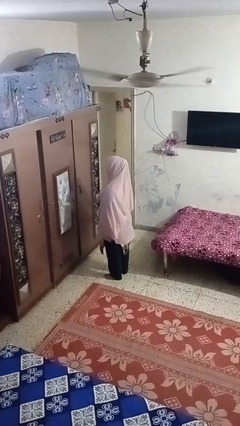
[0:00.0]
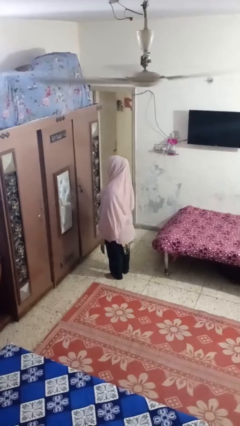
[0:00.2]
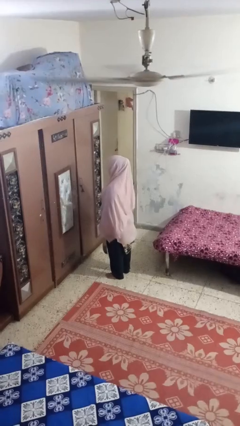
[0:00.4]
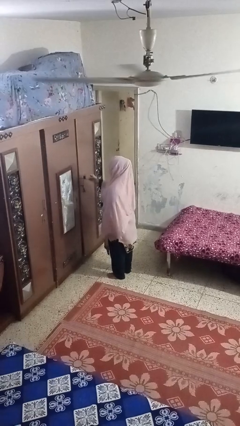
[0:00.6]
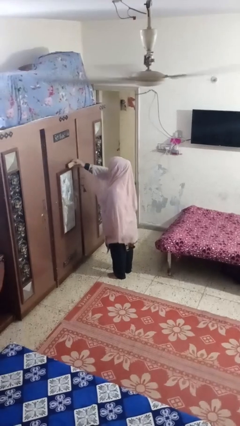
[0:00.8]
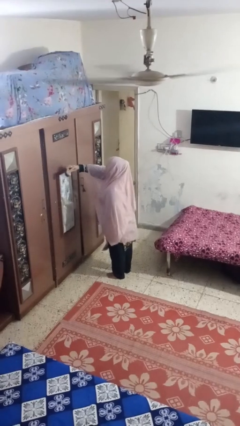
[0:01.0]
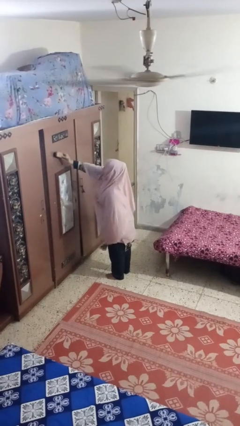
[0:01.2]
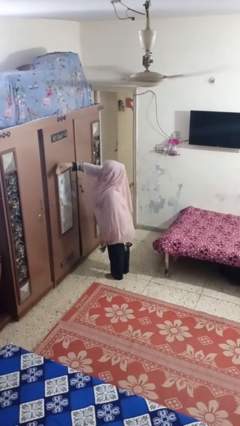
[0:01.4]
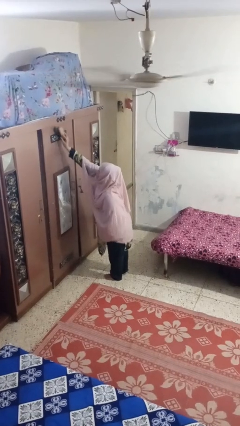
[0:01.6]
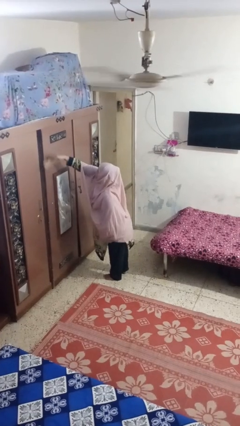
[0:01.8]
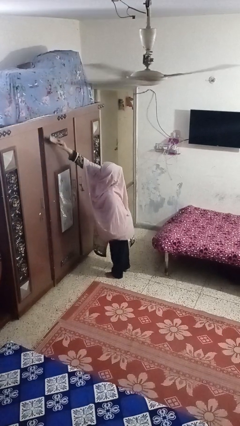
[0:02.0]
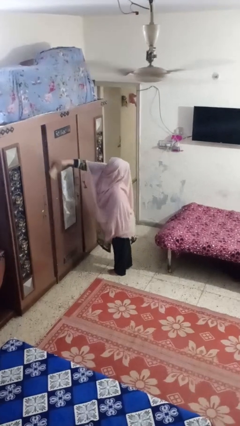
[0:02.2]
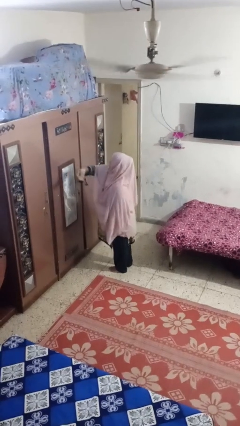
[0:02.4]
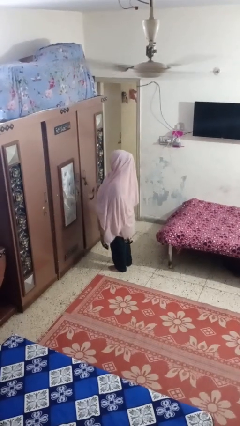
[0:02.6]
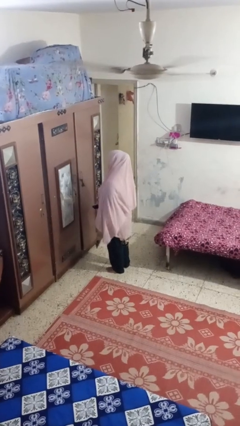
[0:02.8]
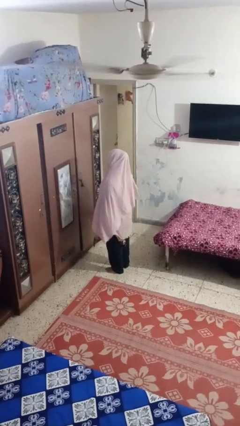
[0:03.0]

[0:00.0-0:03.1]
person dusts furniture

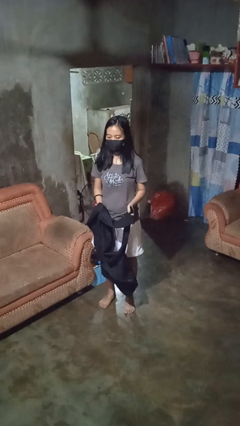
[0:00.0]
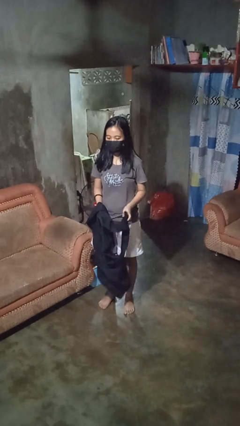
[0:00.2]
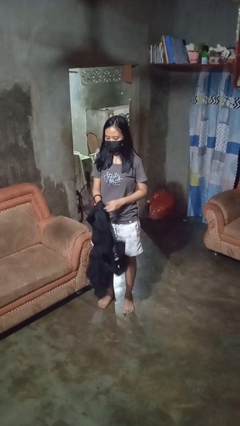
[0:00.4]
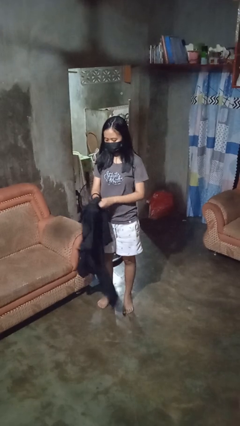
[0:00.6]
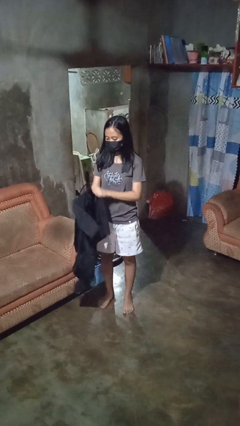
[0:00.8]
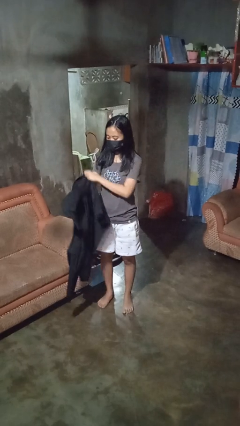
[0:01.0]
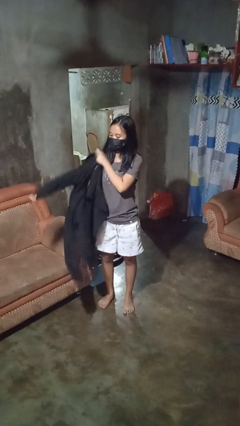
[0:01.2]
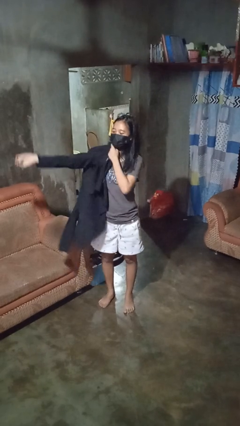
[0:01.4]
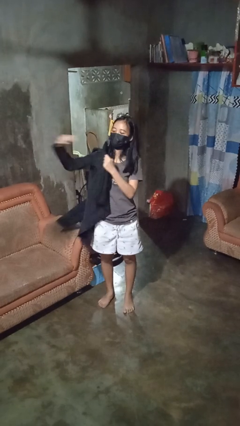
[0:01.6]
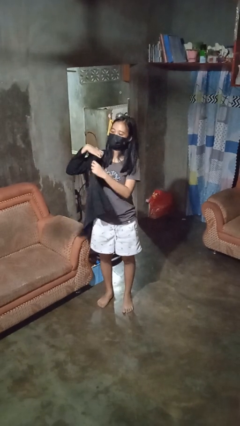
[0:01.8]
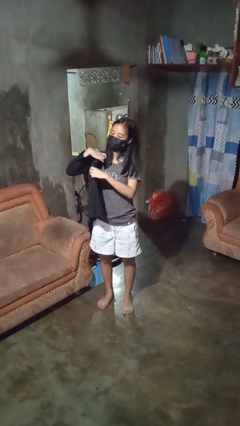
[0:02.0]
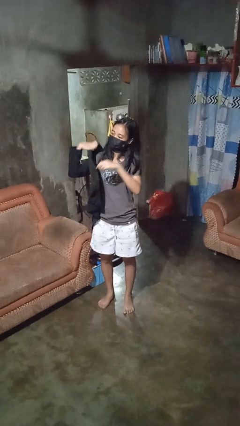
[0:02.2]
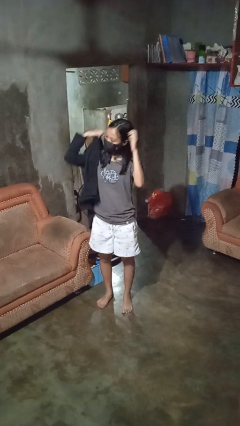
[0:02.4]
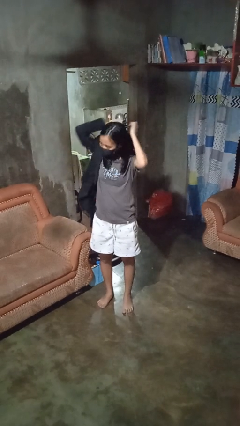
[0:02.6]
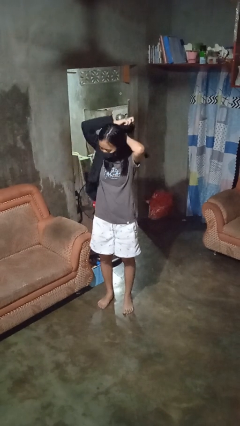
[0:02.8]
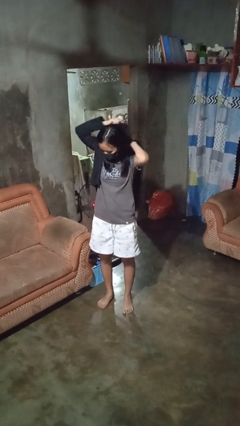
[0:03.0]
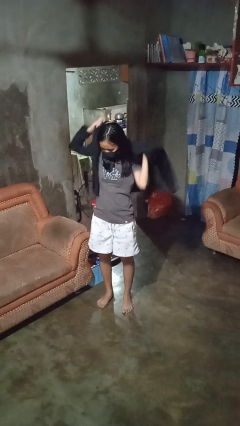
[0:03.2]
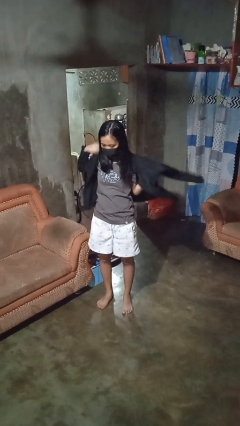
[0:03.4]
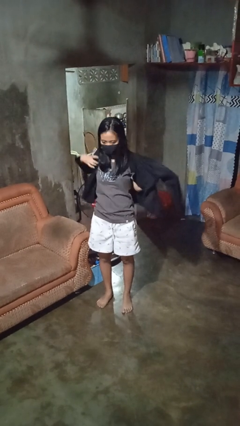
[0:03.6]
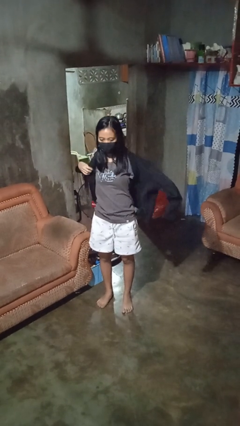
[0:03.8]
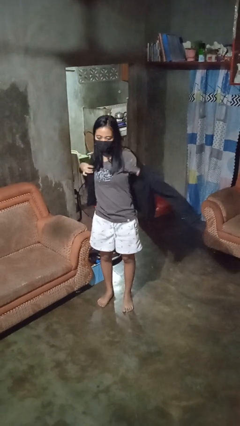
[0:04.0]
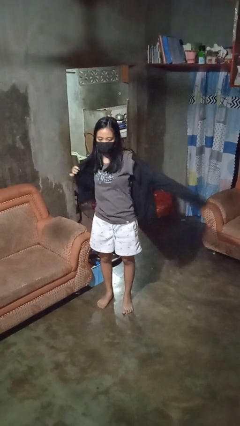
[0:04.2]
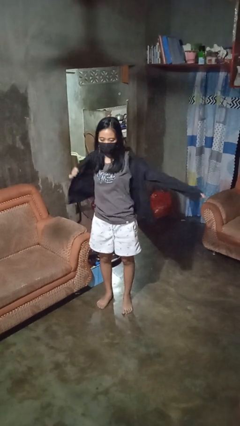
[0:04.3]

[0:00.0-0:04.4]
person puts on shirt

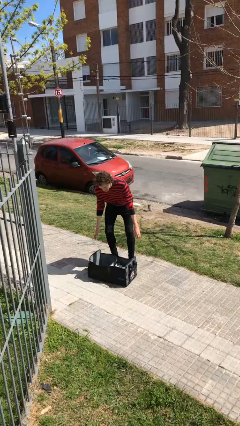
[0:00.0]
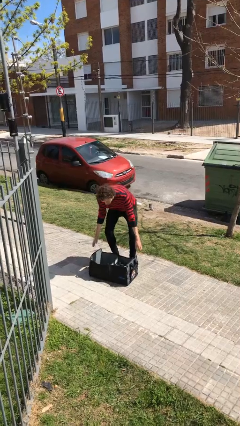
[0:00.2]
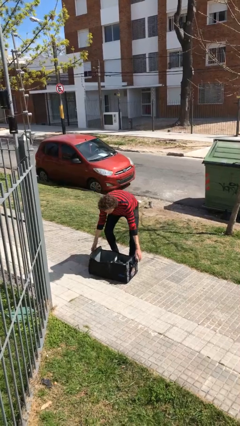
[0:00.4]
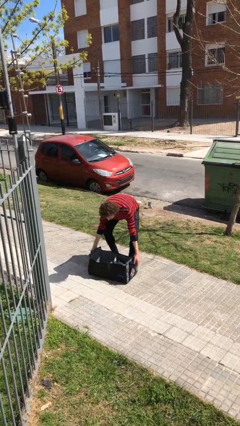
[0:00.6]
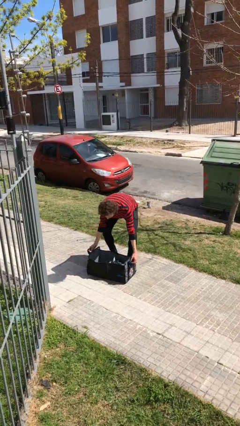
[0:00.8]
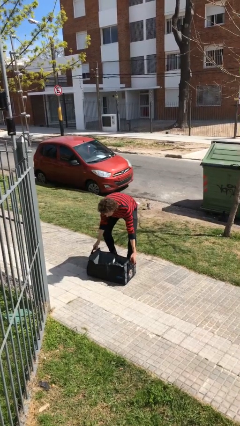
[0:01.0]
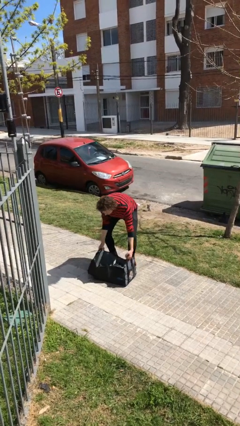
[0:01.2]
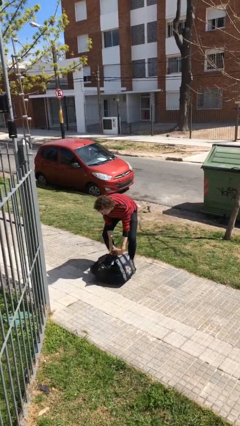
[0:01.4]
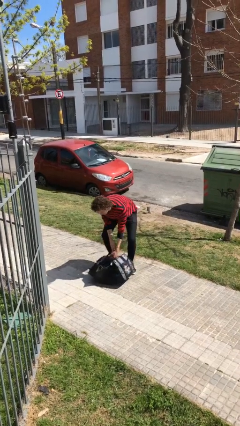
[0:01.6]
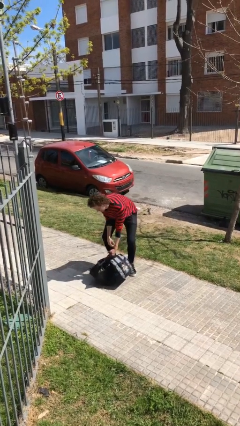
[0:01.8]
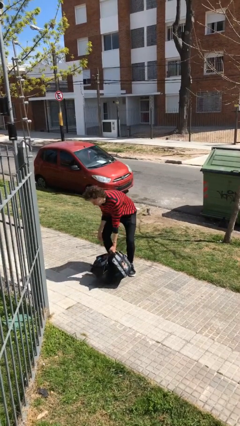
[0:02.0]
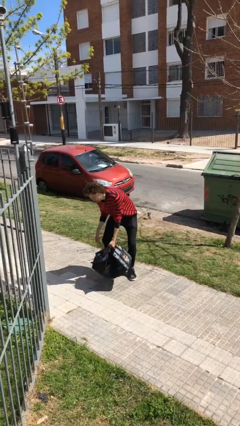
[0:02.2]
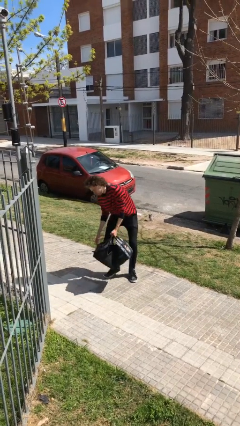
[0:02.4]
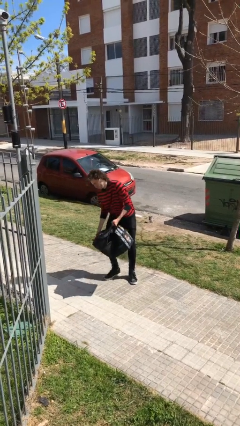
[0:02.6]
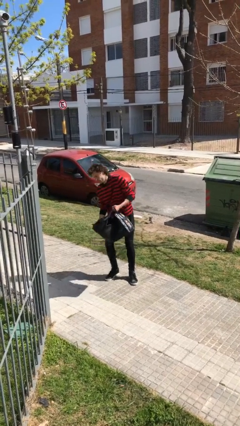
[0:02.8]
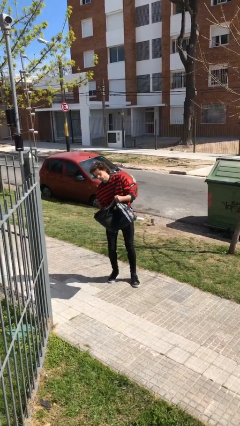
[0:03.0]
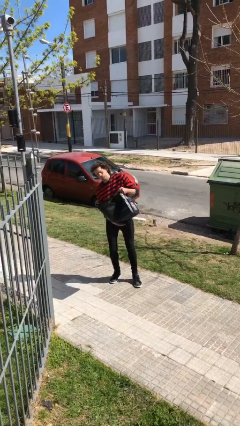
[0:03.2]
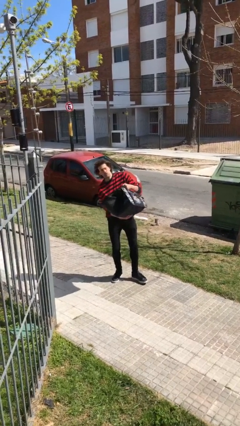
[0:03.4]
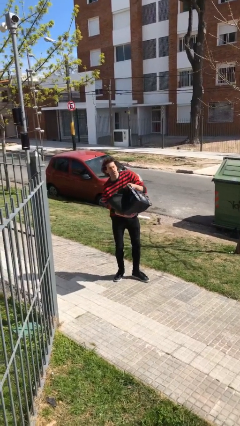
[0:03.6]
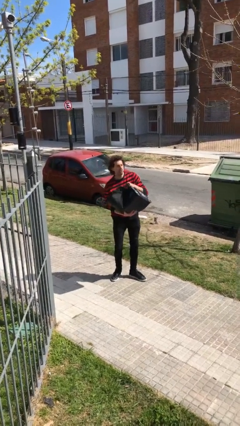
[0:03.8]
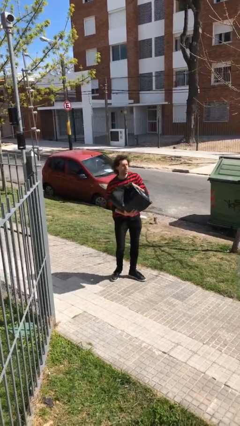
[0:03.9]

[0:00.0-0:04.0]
person picks up object from floor

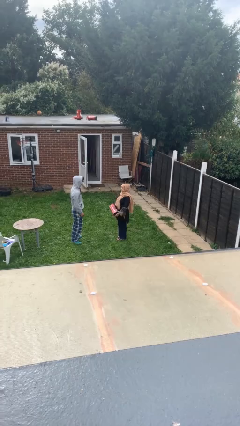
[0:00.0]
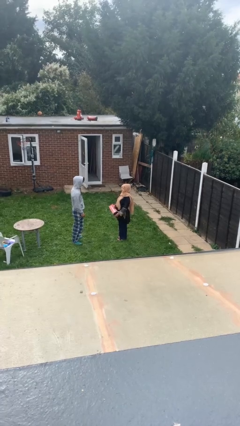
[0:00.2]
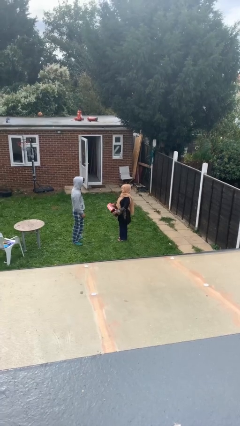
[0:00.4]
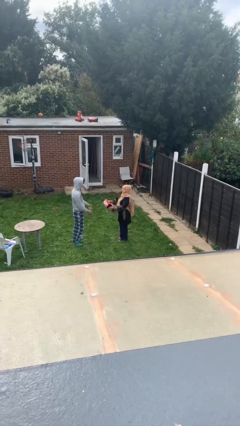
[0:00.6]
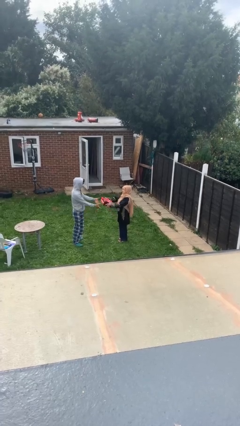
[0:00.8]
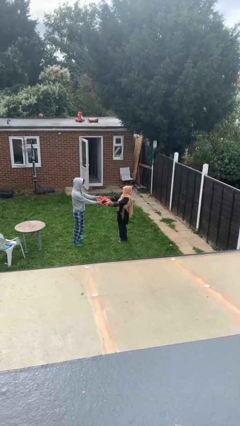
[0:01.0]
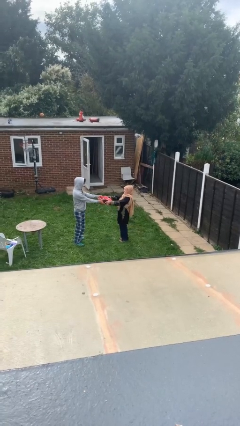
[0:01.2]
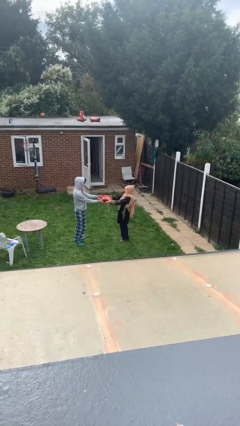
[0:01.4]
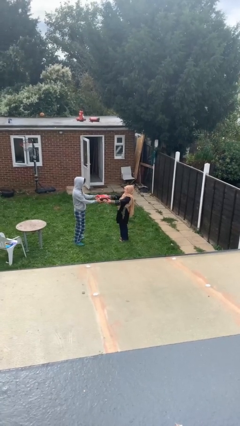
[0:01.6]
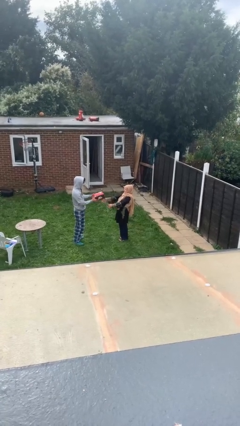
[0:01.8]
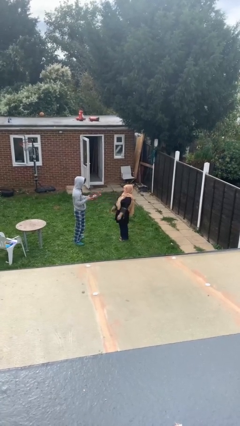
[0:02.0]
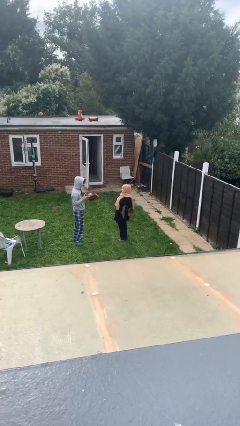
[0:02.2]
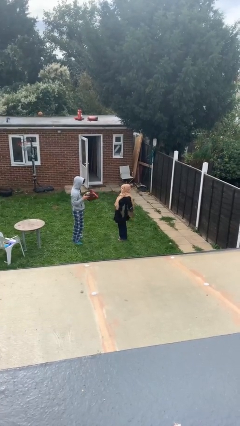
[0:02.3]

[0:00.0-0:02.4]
person transfers object to person

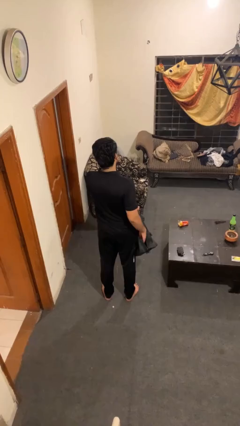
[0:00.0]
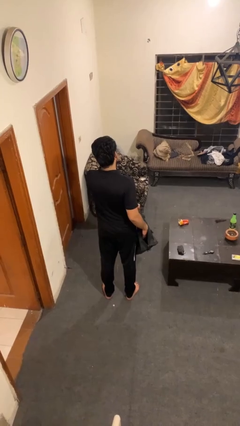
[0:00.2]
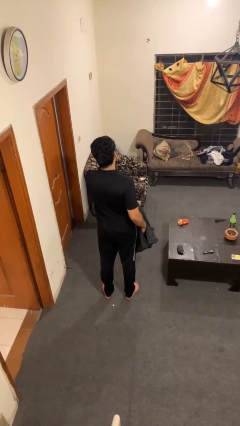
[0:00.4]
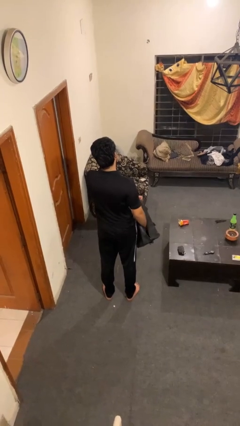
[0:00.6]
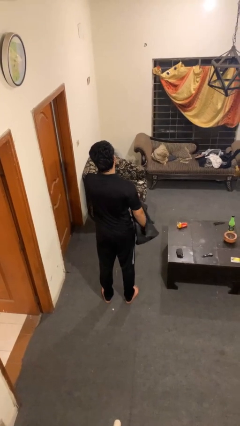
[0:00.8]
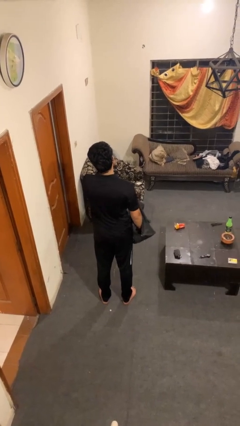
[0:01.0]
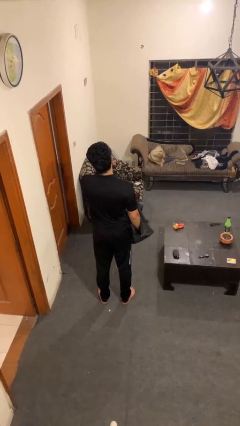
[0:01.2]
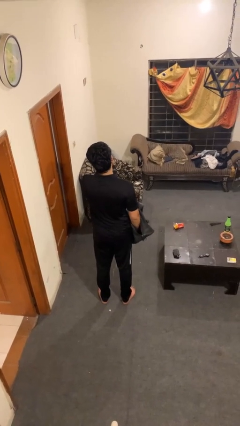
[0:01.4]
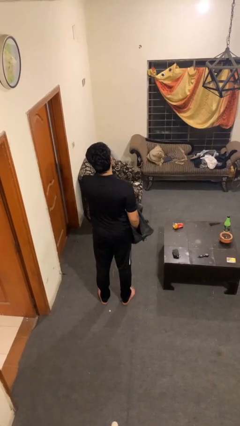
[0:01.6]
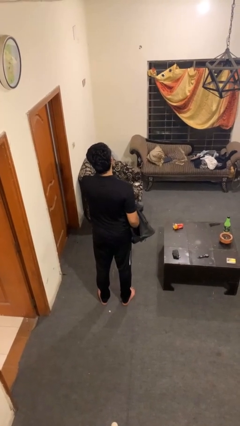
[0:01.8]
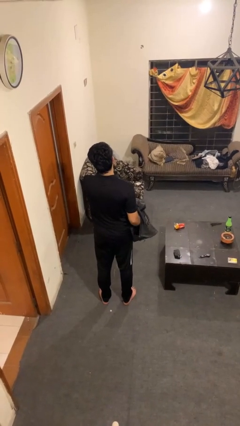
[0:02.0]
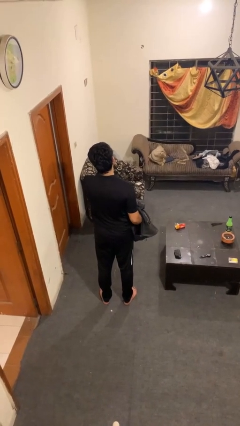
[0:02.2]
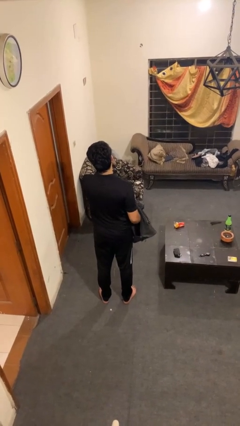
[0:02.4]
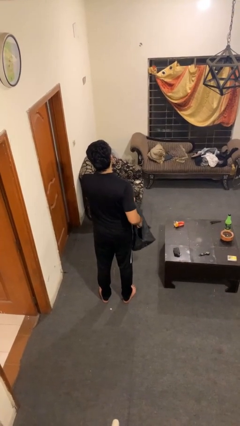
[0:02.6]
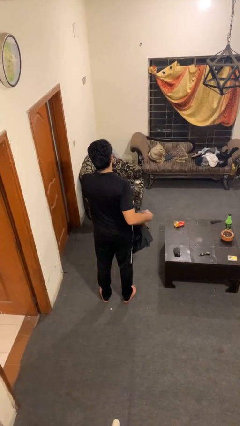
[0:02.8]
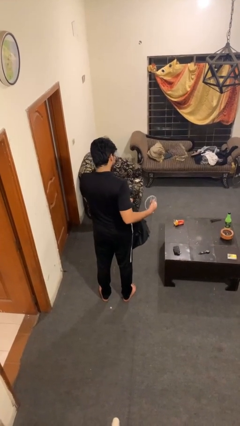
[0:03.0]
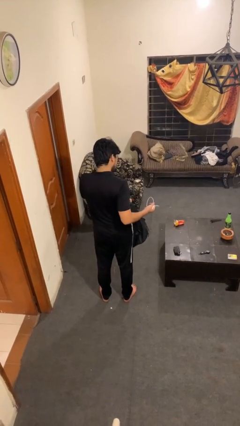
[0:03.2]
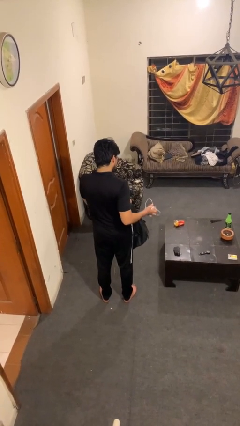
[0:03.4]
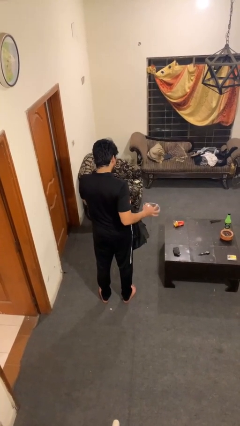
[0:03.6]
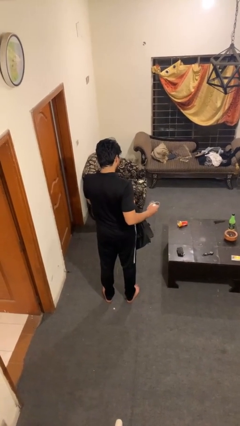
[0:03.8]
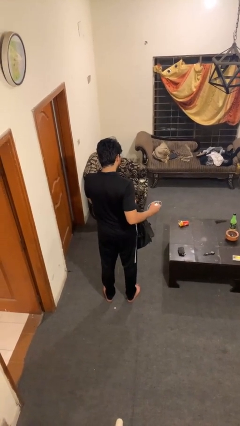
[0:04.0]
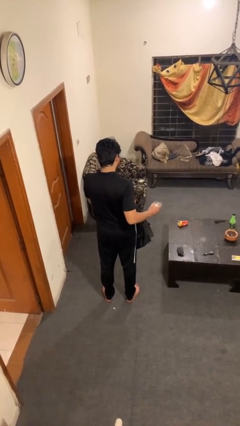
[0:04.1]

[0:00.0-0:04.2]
person takes object from bag
